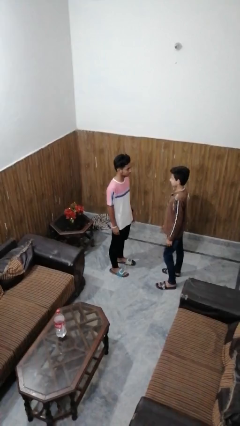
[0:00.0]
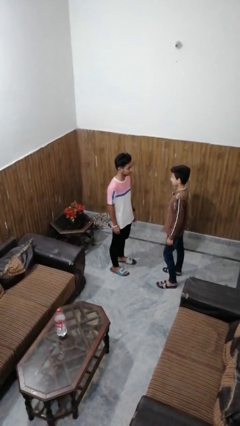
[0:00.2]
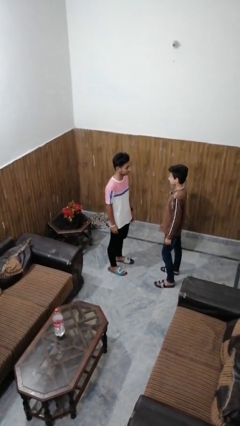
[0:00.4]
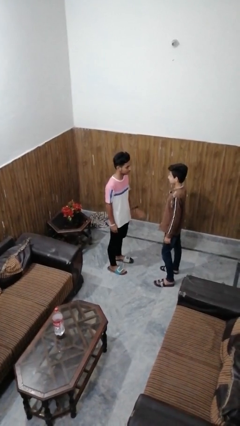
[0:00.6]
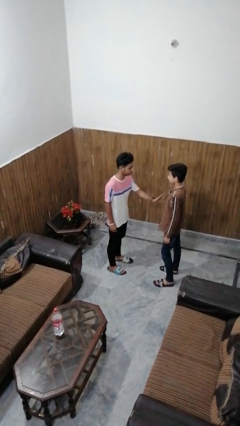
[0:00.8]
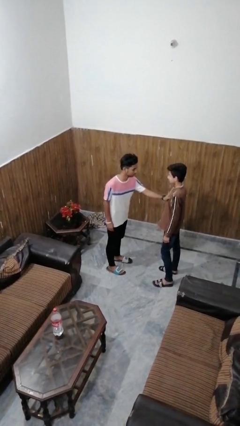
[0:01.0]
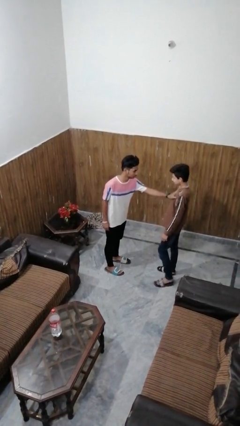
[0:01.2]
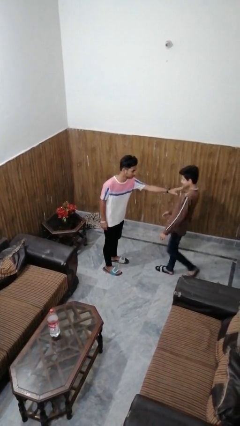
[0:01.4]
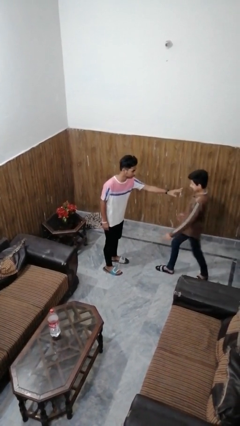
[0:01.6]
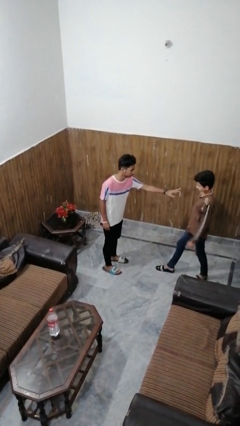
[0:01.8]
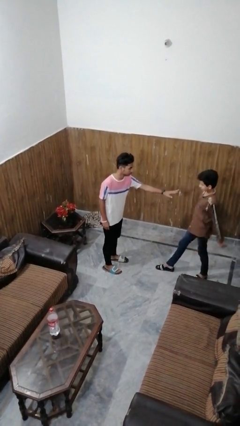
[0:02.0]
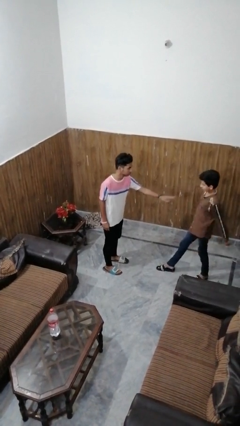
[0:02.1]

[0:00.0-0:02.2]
person shoves person

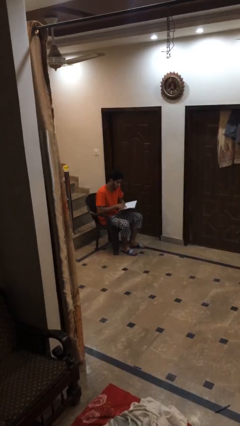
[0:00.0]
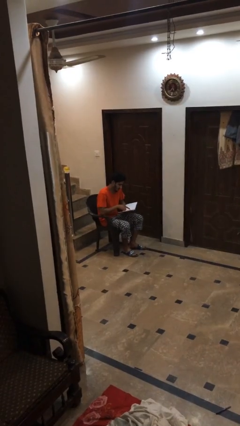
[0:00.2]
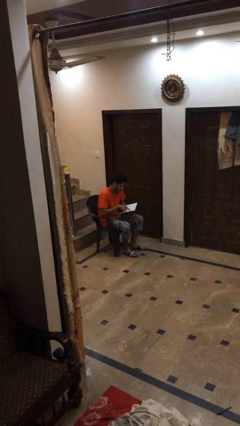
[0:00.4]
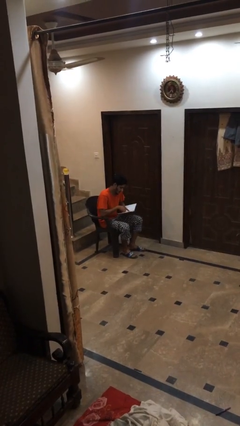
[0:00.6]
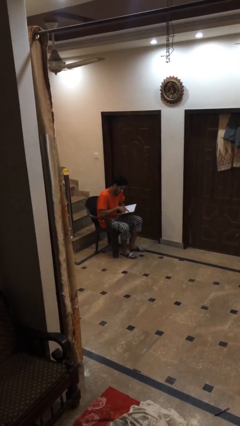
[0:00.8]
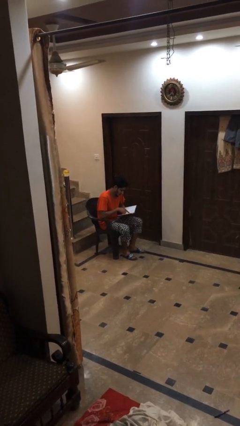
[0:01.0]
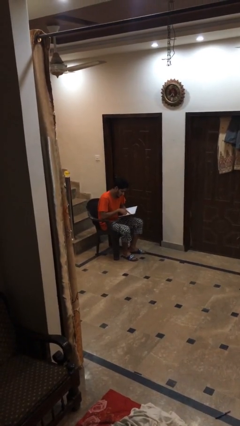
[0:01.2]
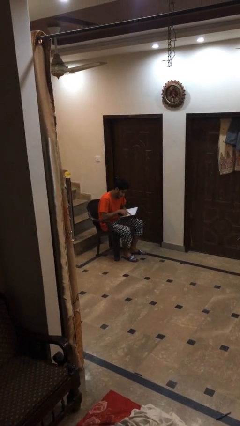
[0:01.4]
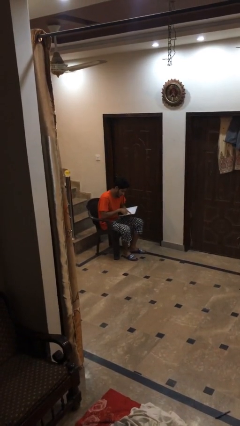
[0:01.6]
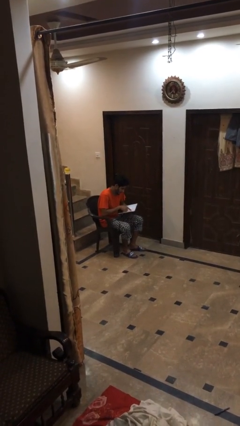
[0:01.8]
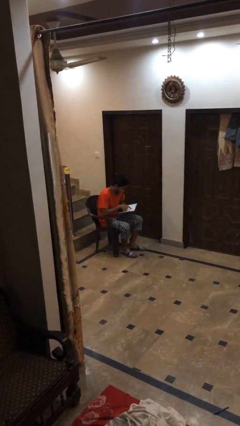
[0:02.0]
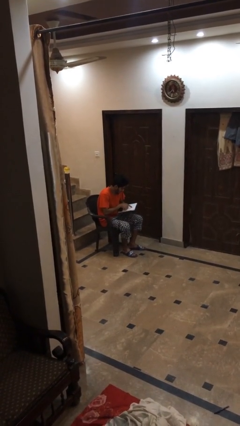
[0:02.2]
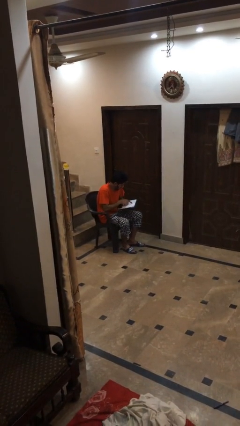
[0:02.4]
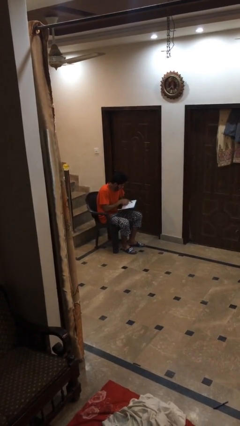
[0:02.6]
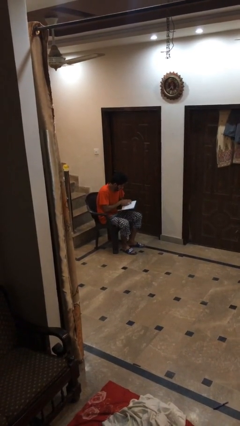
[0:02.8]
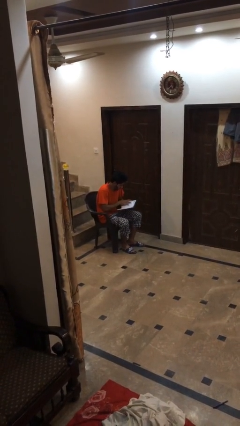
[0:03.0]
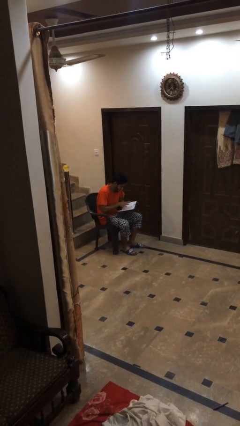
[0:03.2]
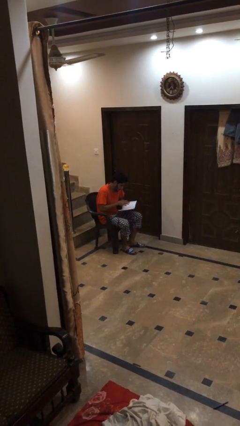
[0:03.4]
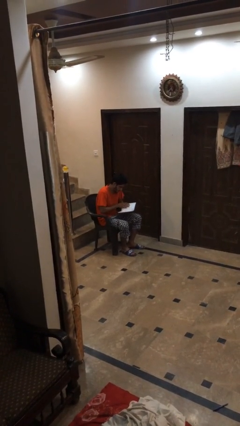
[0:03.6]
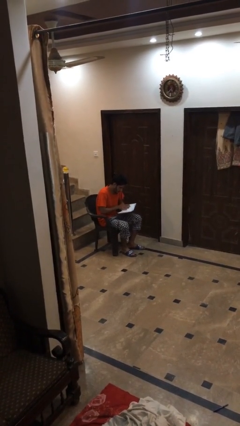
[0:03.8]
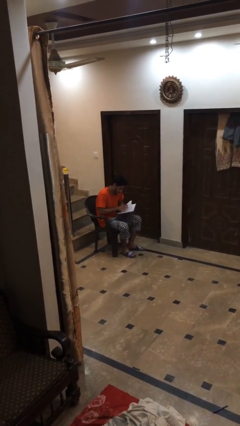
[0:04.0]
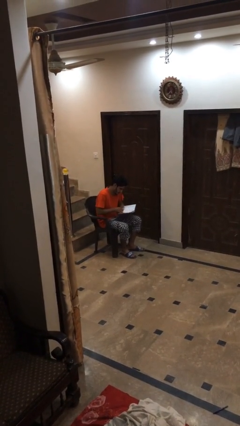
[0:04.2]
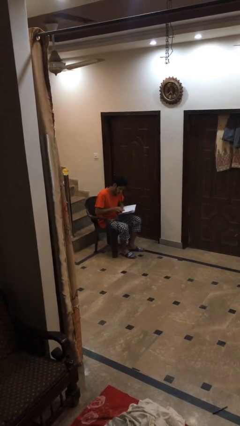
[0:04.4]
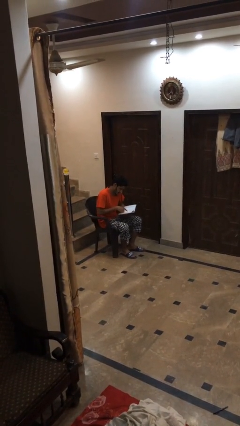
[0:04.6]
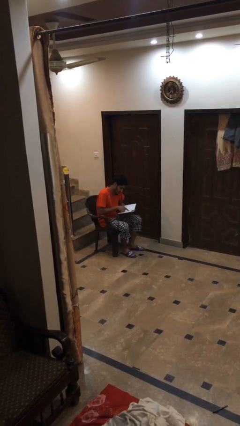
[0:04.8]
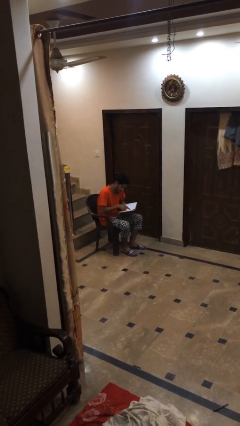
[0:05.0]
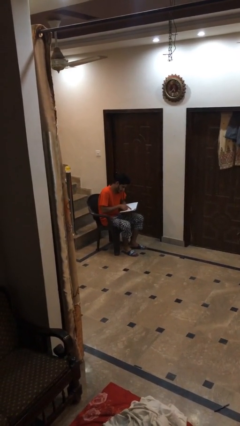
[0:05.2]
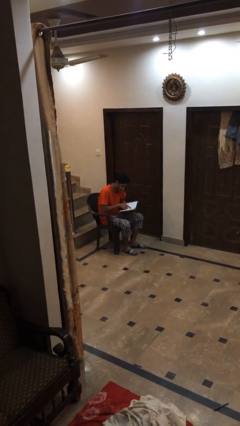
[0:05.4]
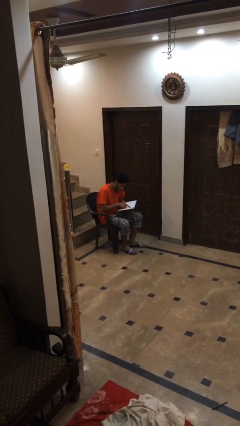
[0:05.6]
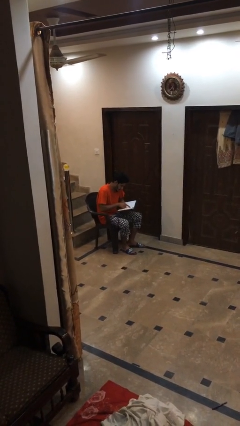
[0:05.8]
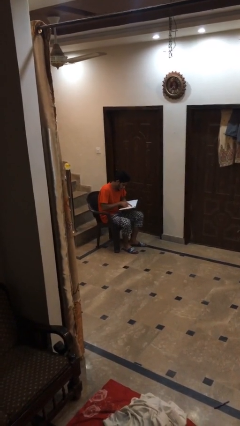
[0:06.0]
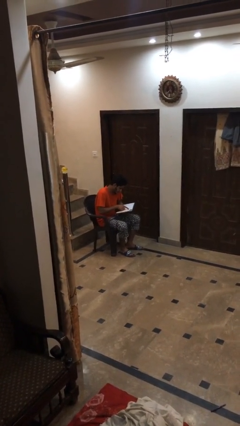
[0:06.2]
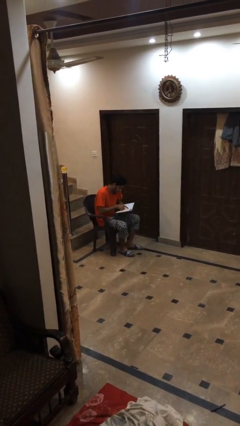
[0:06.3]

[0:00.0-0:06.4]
person reads document

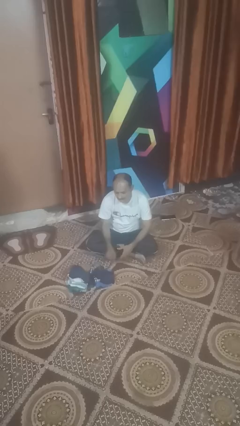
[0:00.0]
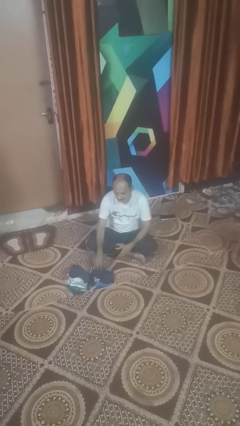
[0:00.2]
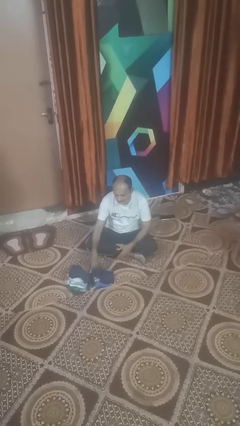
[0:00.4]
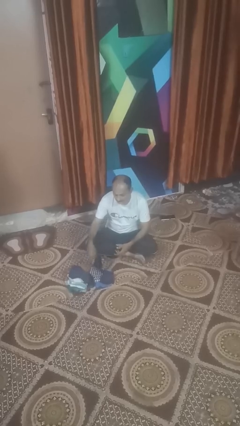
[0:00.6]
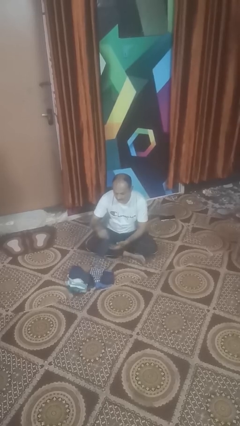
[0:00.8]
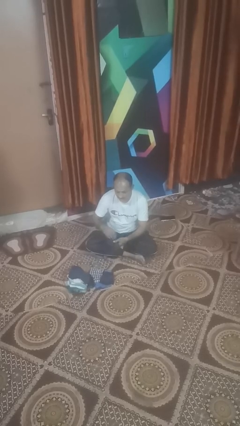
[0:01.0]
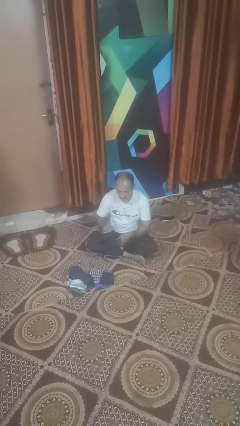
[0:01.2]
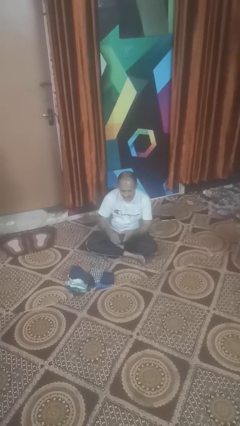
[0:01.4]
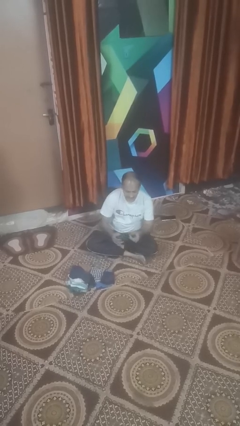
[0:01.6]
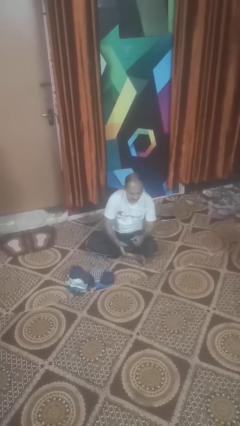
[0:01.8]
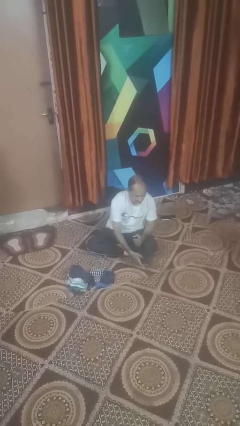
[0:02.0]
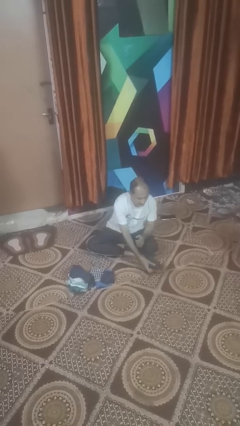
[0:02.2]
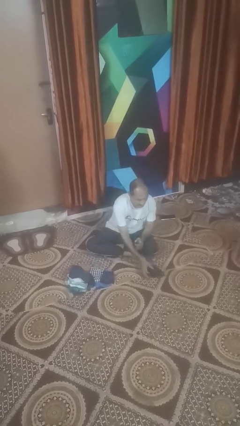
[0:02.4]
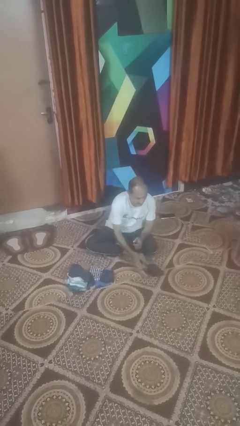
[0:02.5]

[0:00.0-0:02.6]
person folds socks

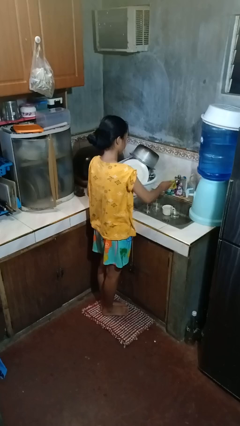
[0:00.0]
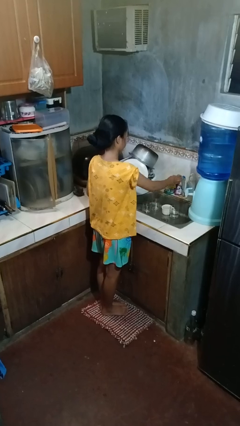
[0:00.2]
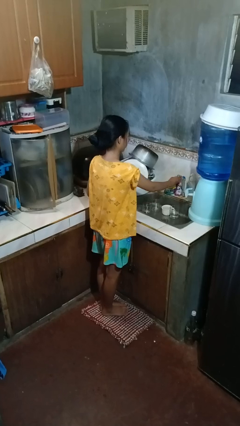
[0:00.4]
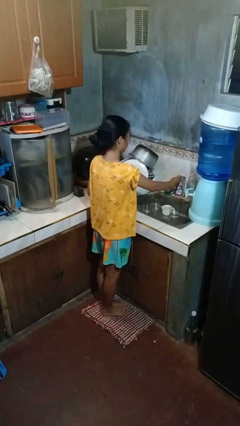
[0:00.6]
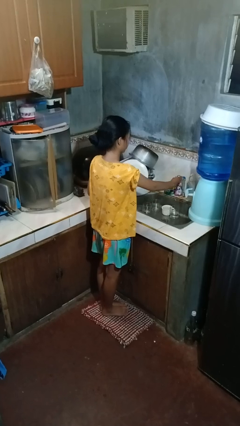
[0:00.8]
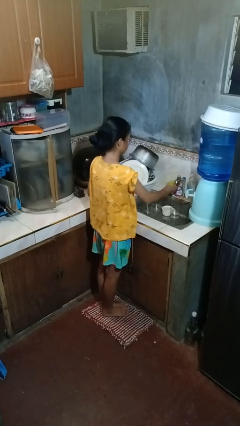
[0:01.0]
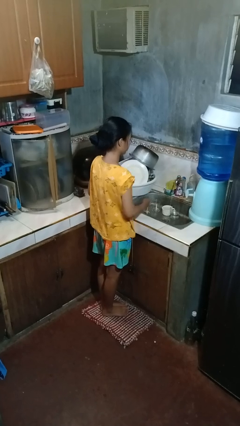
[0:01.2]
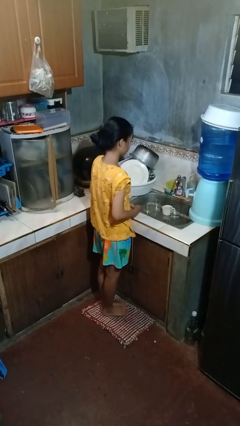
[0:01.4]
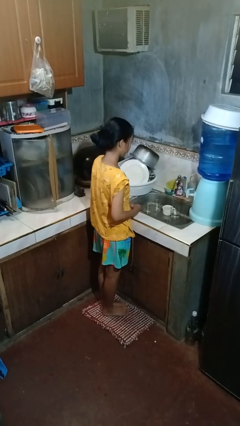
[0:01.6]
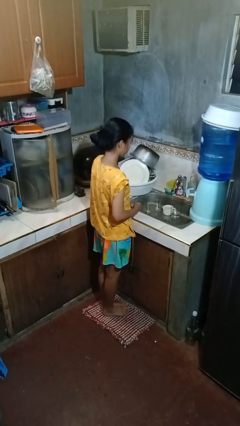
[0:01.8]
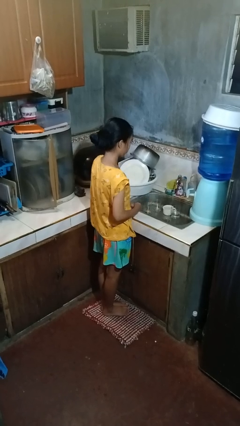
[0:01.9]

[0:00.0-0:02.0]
person turns on faucet

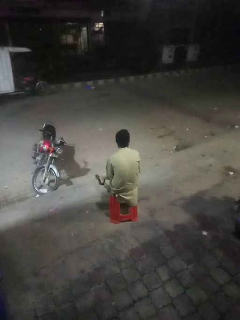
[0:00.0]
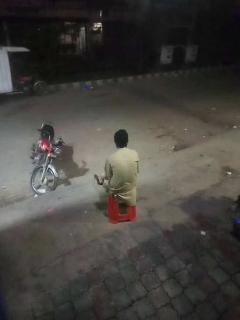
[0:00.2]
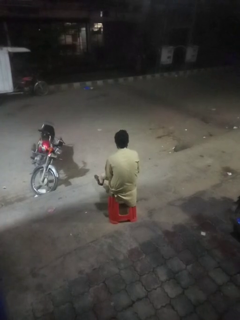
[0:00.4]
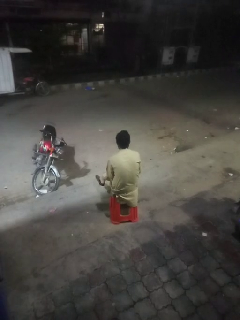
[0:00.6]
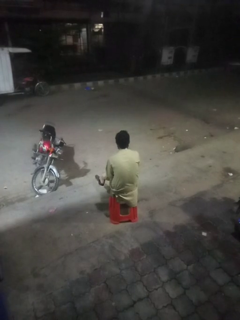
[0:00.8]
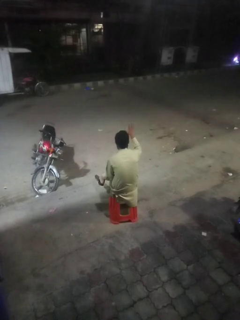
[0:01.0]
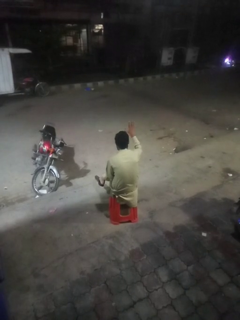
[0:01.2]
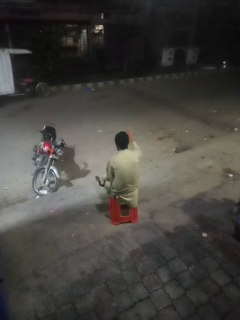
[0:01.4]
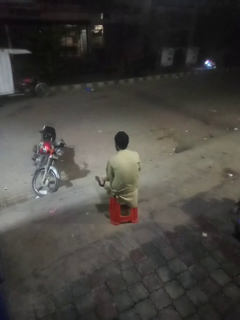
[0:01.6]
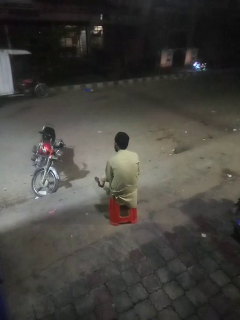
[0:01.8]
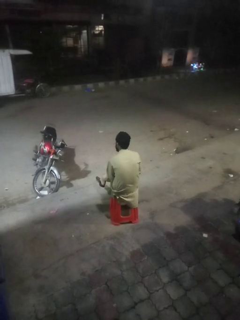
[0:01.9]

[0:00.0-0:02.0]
person gestures number five

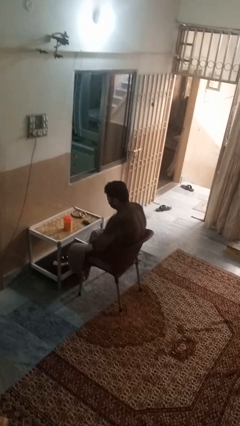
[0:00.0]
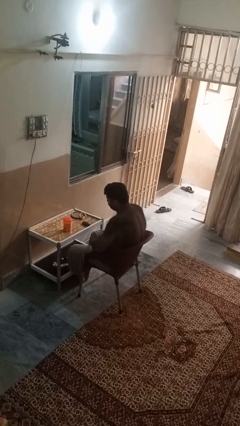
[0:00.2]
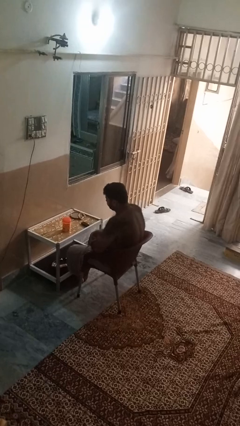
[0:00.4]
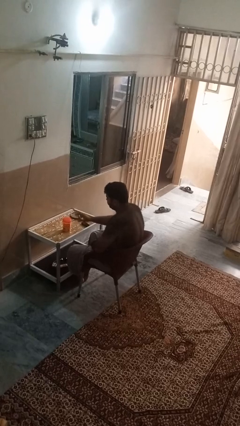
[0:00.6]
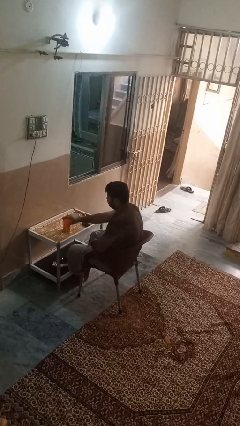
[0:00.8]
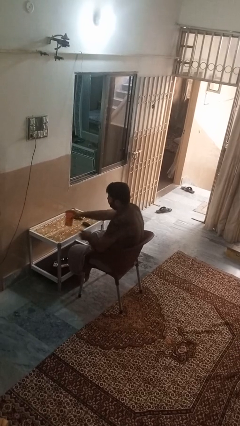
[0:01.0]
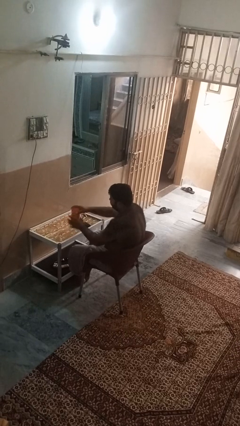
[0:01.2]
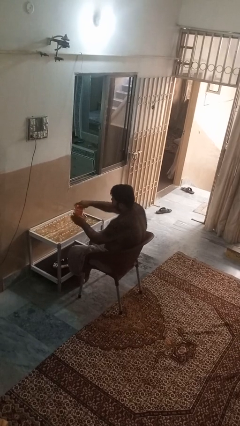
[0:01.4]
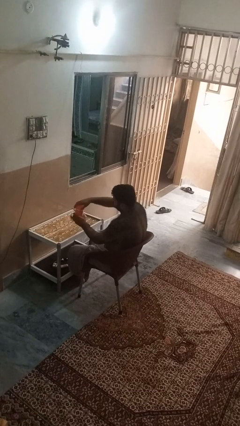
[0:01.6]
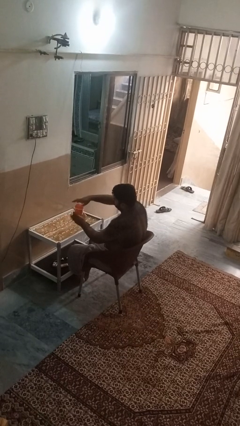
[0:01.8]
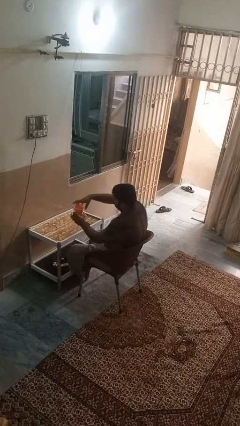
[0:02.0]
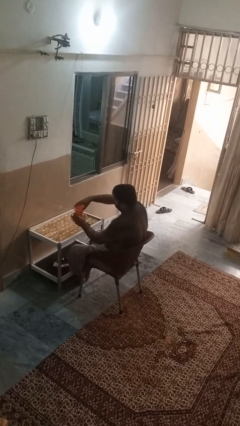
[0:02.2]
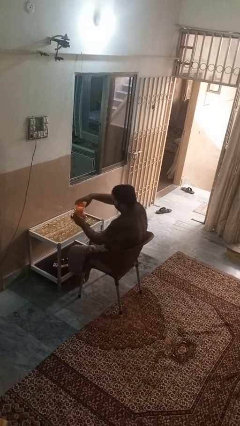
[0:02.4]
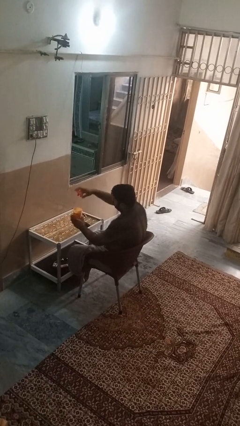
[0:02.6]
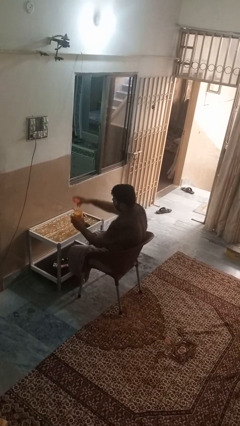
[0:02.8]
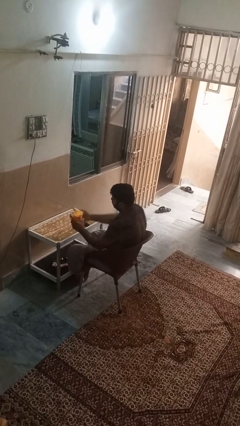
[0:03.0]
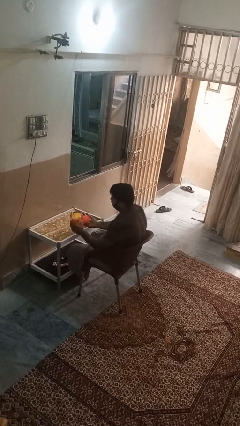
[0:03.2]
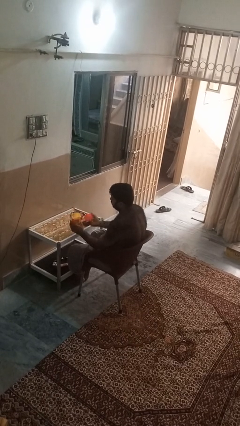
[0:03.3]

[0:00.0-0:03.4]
person opens jar
